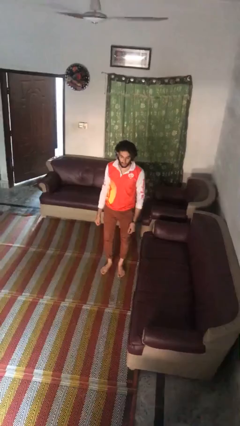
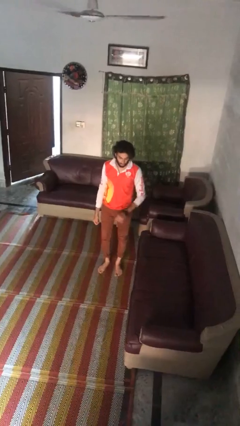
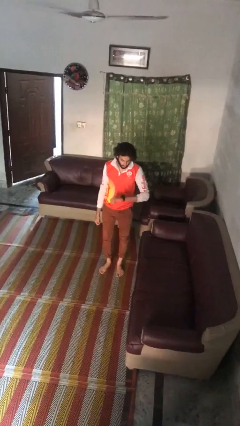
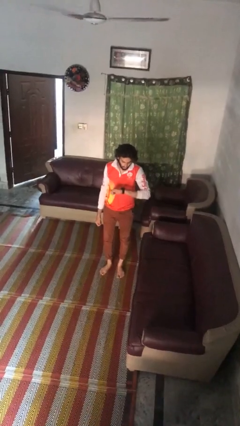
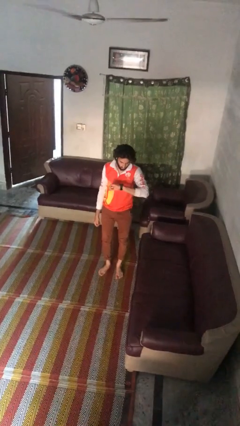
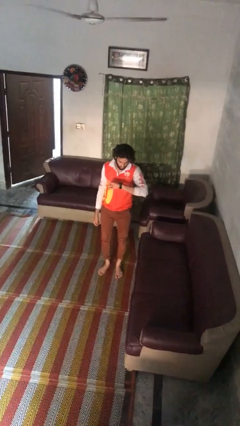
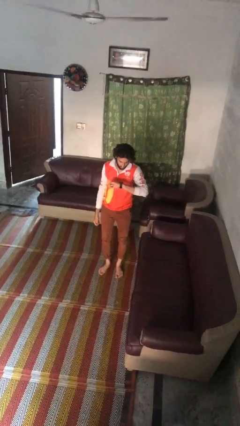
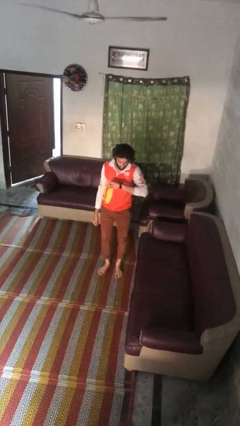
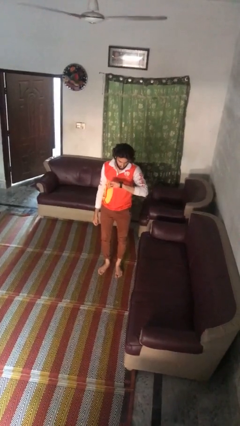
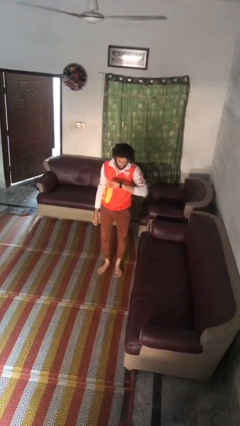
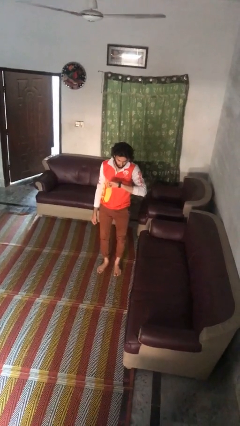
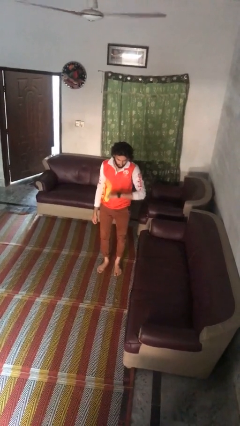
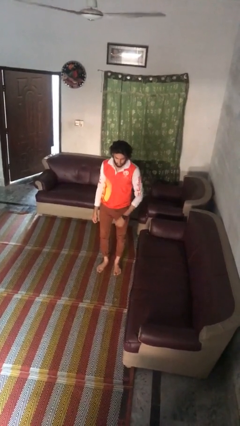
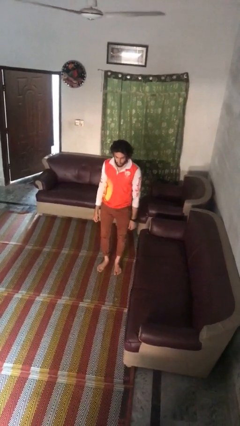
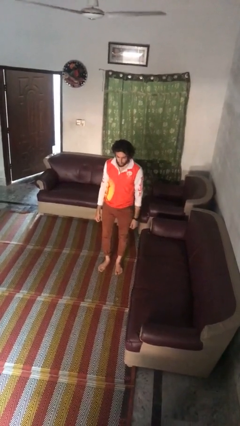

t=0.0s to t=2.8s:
person looks at wristwatch

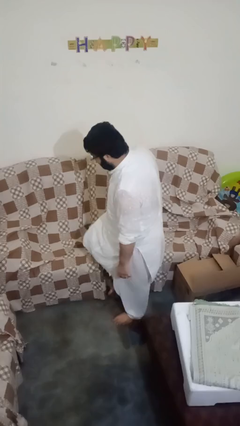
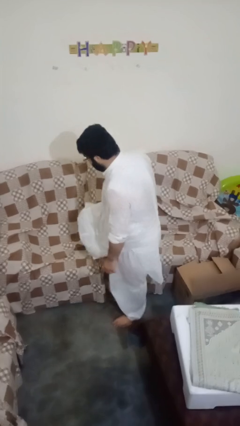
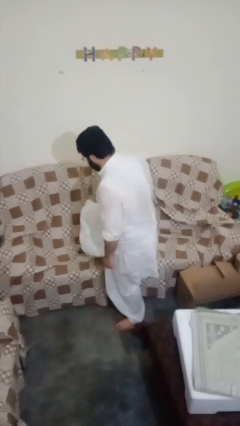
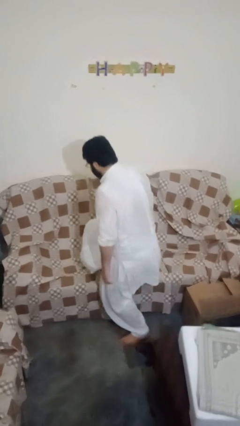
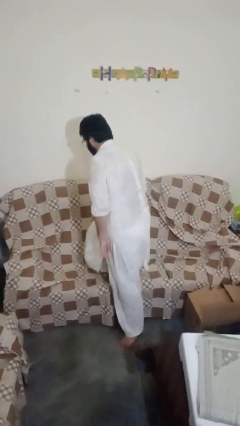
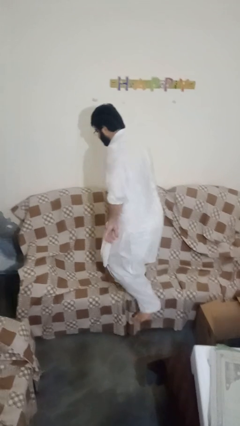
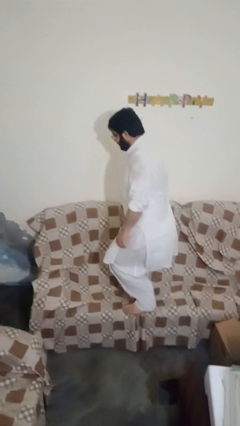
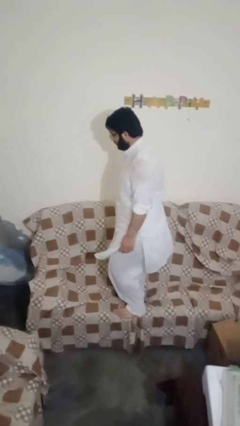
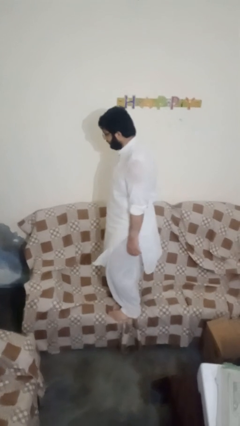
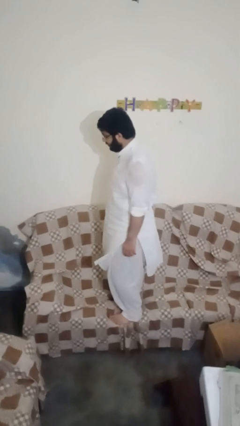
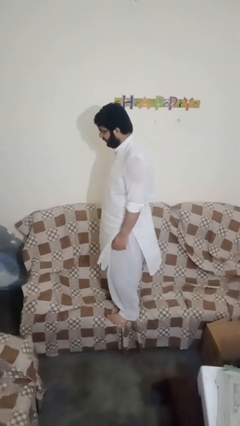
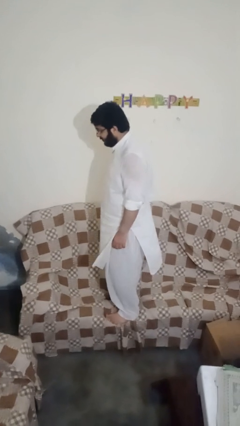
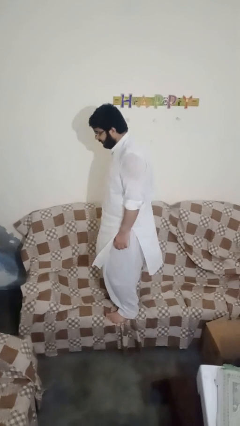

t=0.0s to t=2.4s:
person climbs on couch

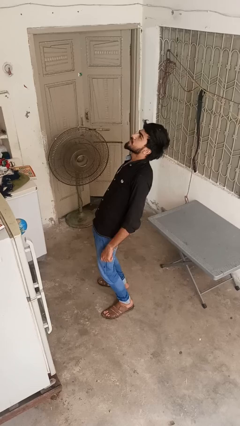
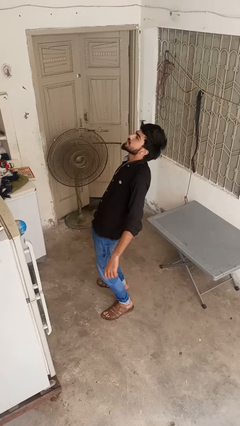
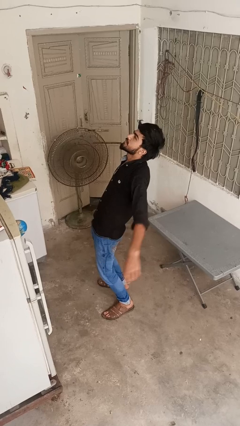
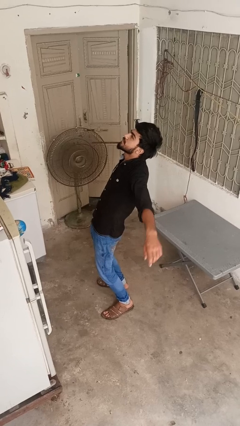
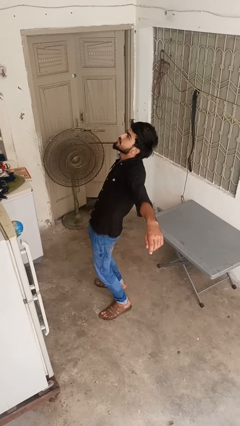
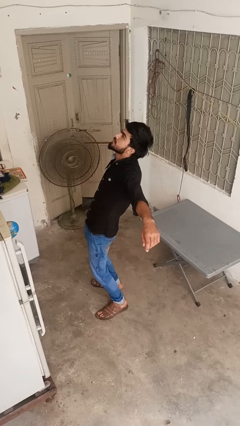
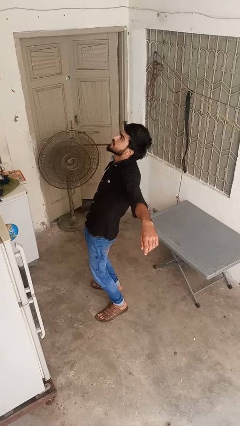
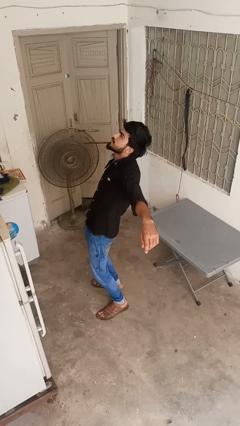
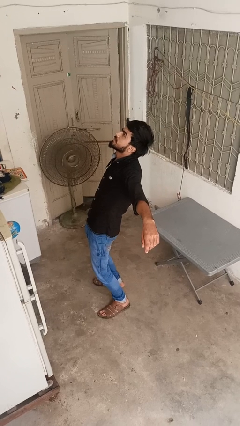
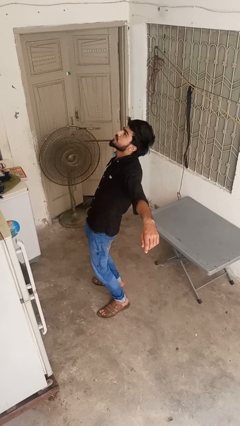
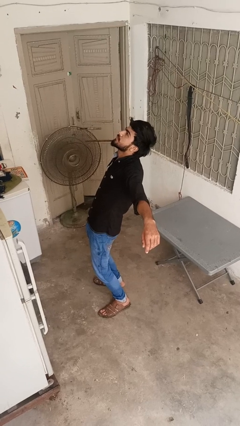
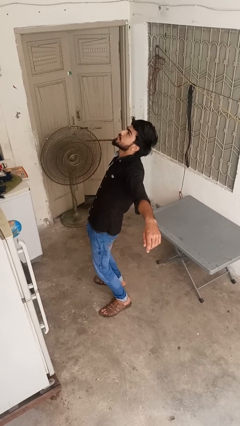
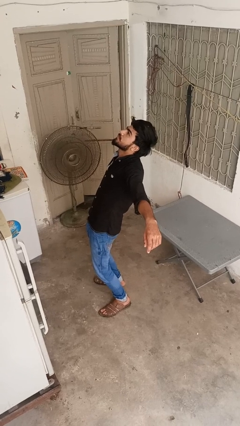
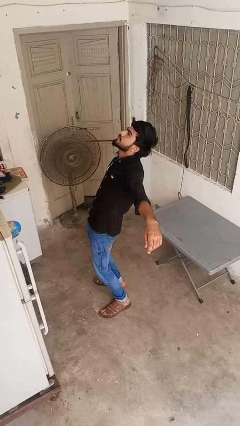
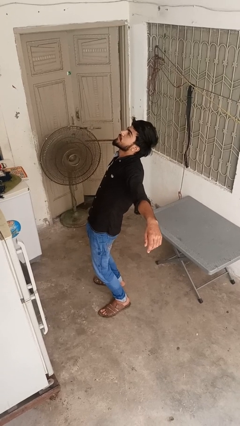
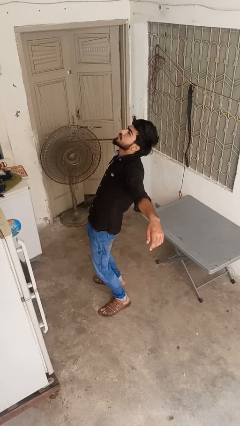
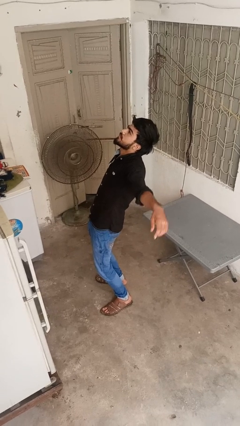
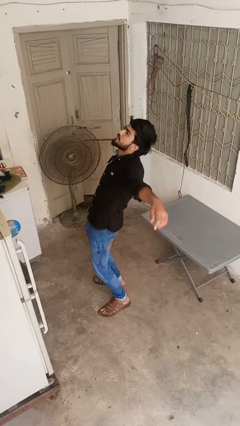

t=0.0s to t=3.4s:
person stretches arms to side

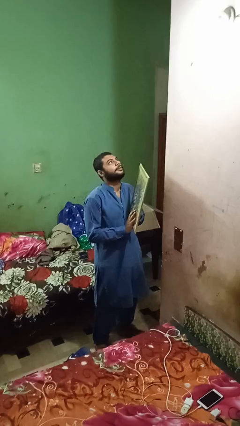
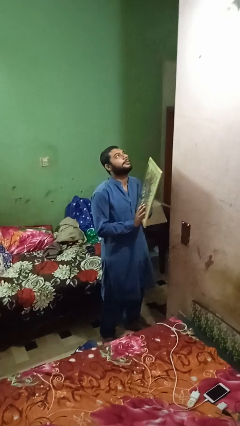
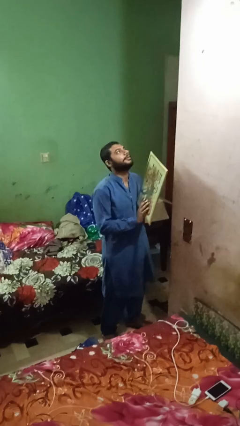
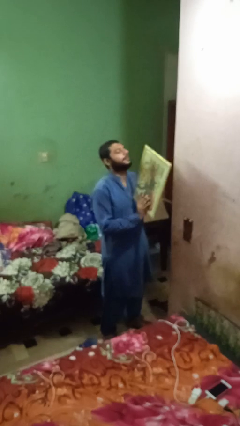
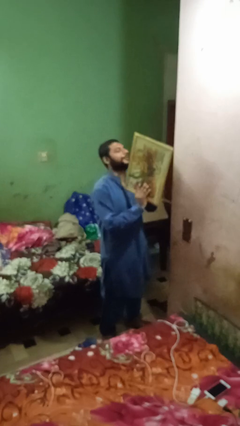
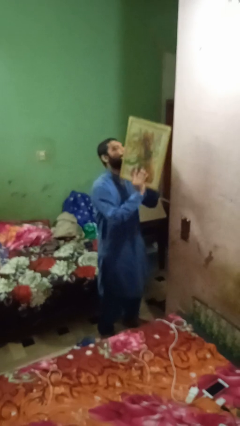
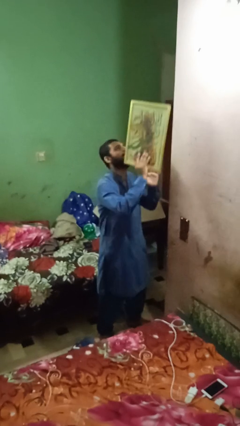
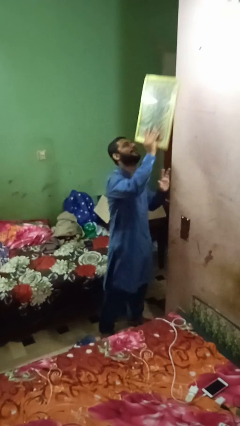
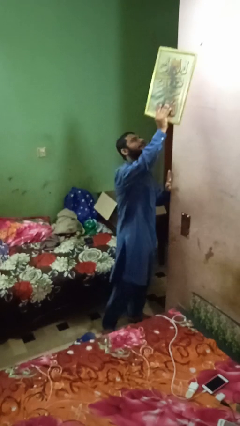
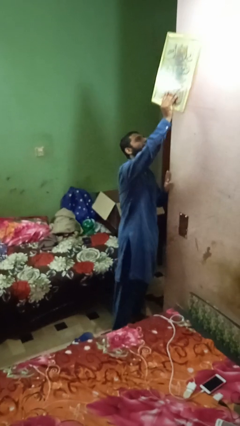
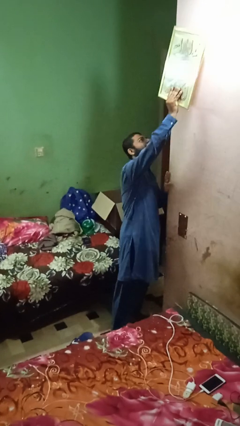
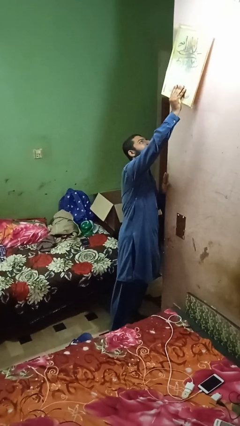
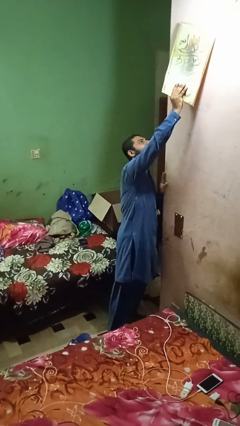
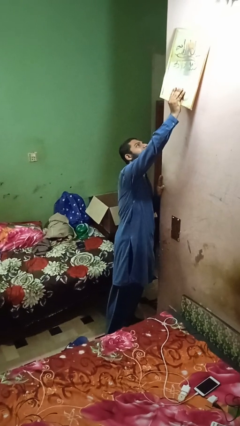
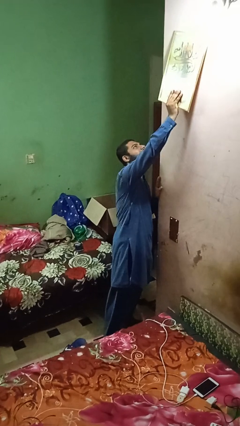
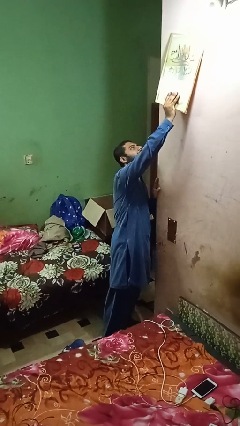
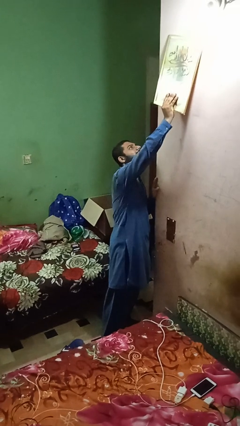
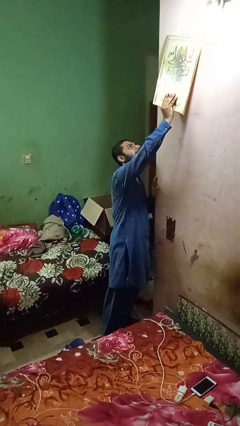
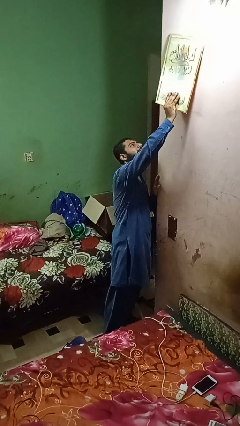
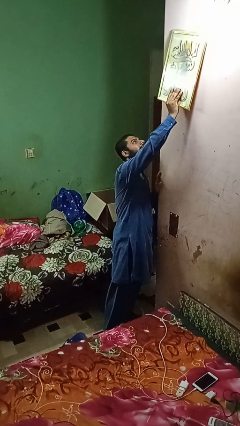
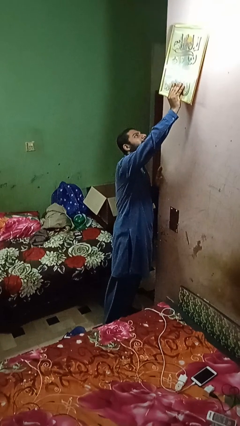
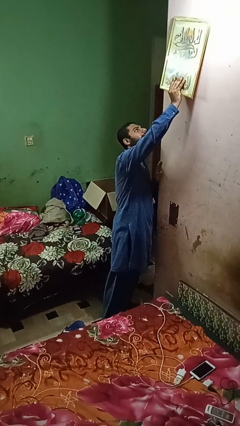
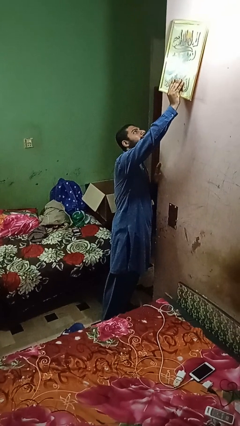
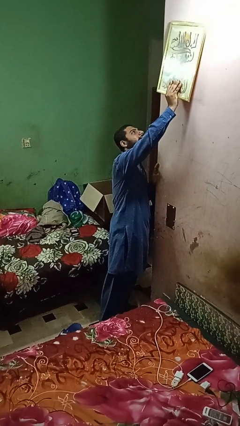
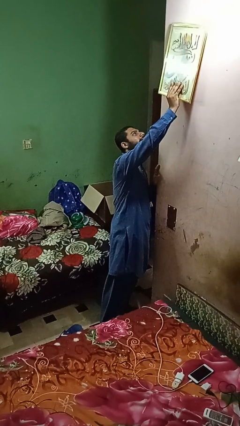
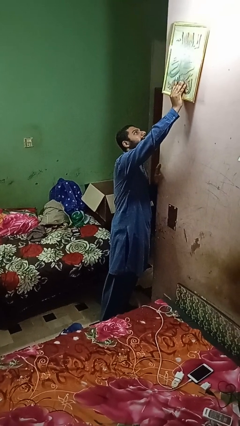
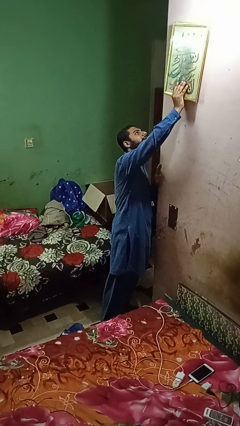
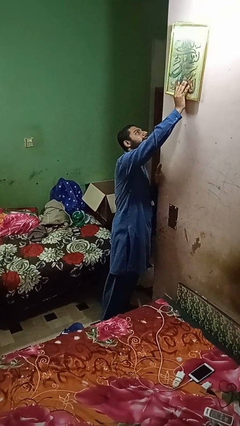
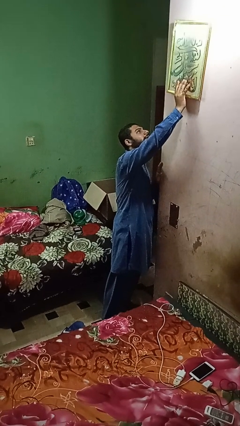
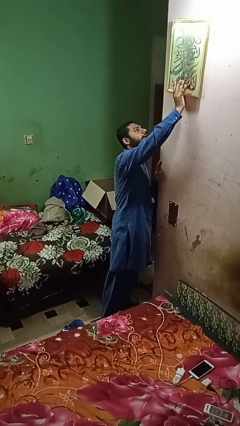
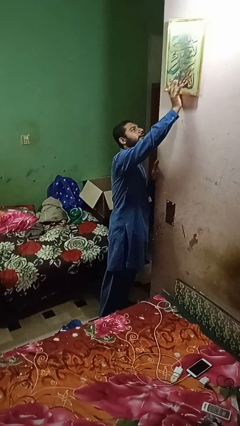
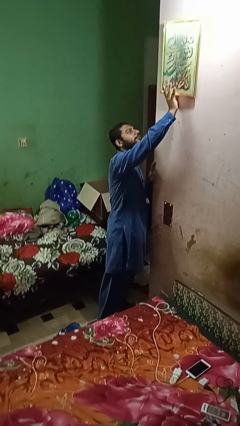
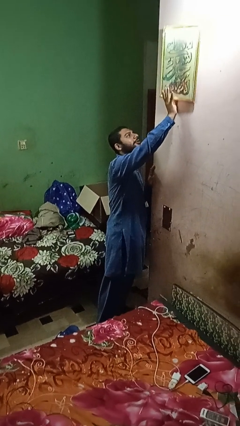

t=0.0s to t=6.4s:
person puts up picture frame

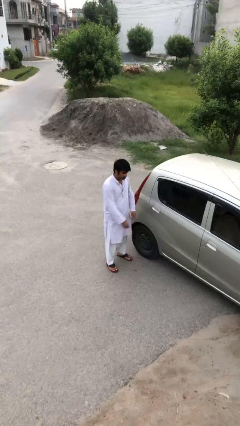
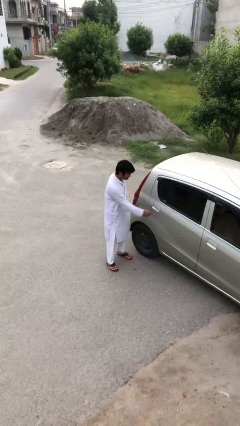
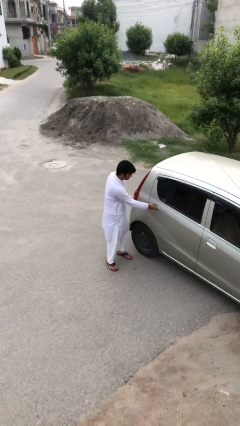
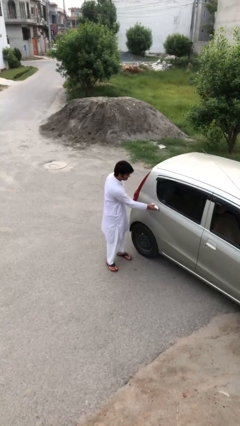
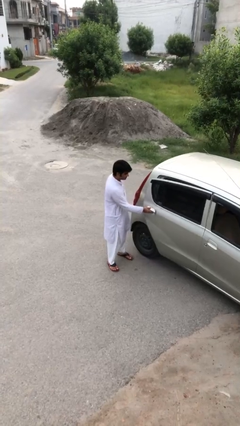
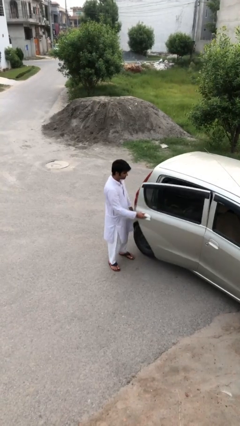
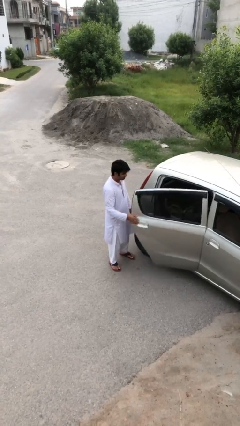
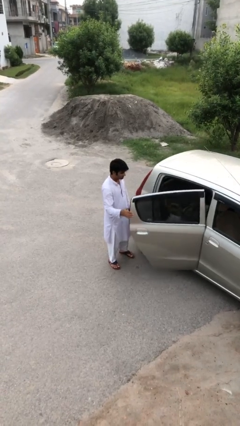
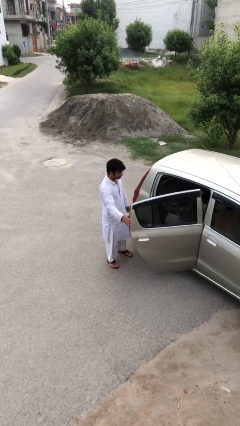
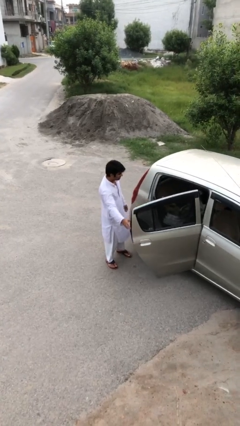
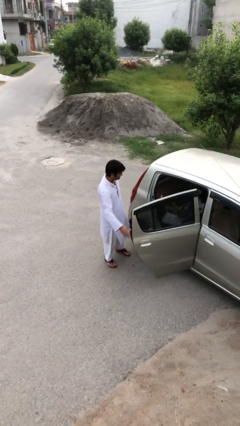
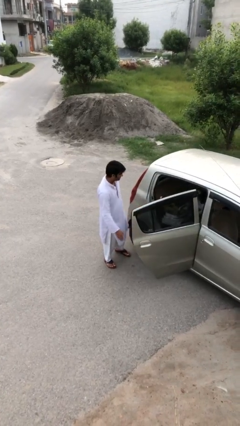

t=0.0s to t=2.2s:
person opens car door

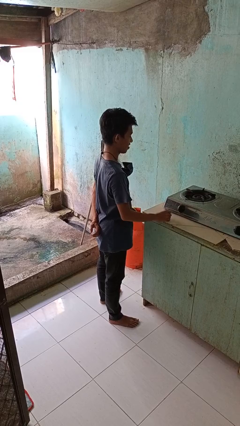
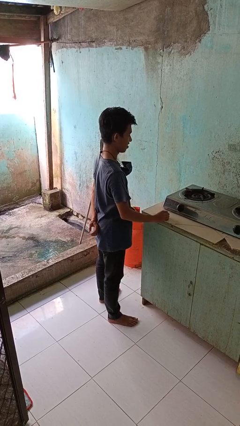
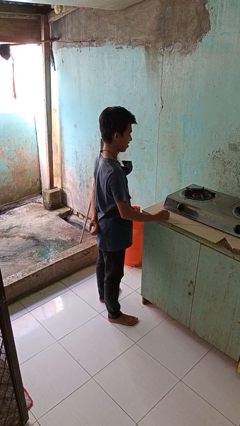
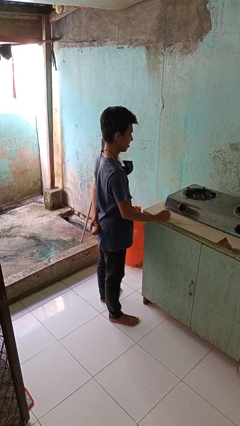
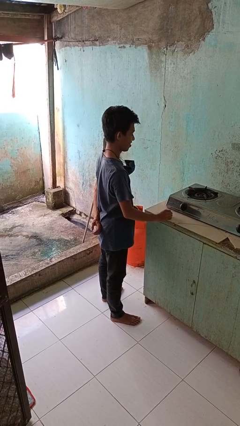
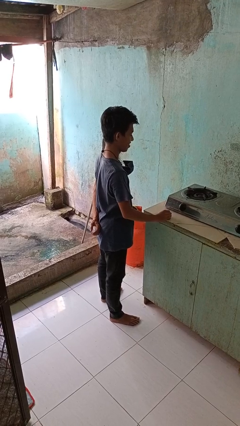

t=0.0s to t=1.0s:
person turns off stovetop
